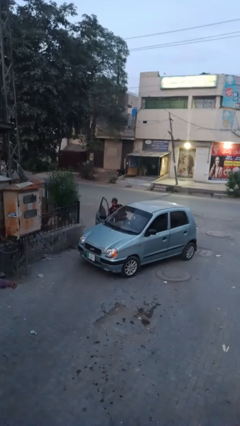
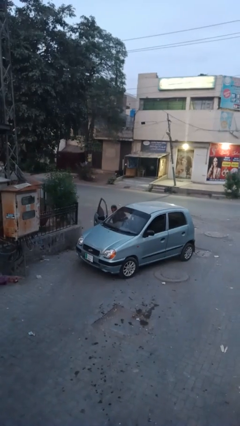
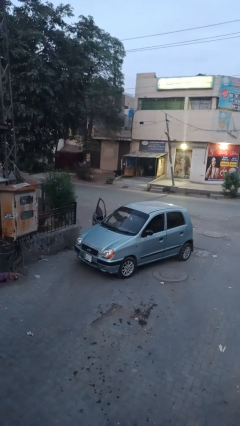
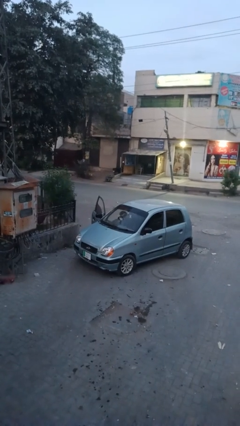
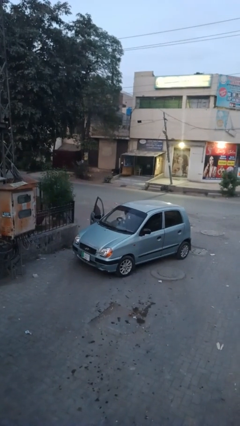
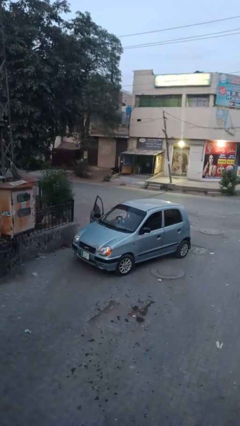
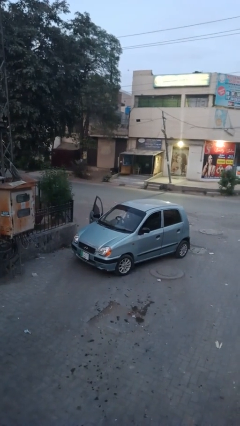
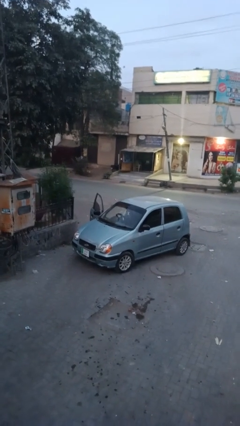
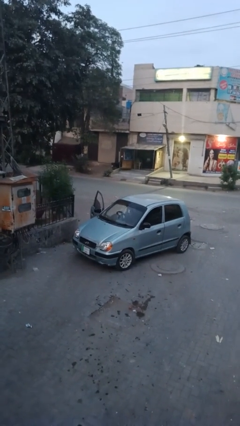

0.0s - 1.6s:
person enters car

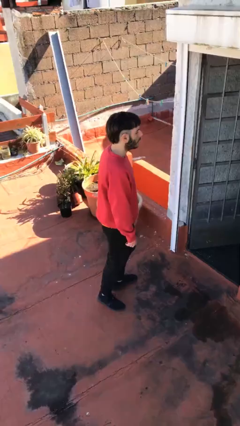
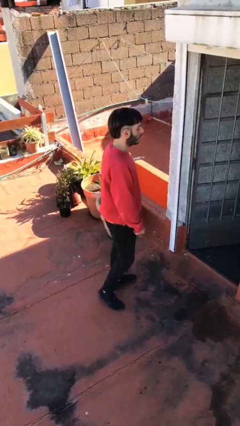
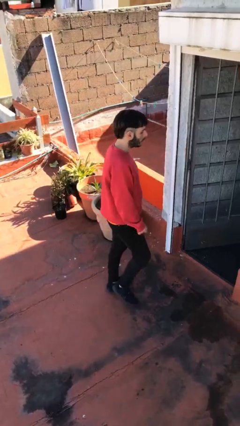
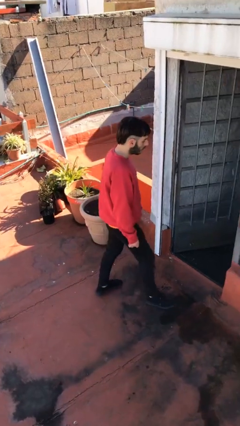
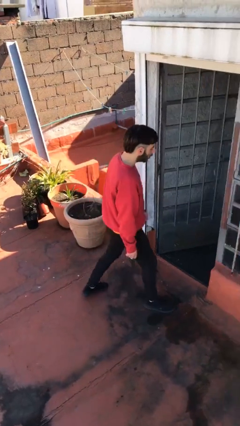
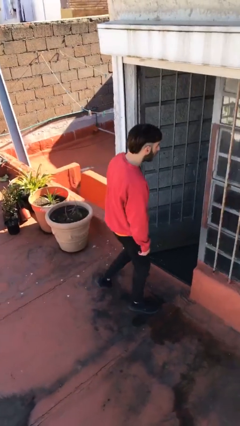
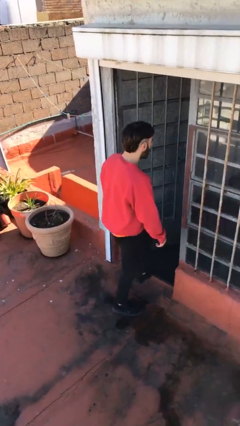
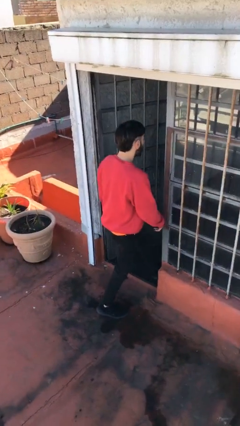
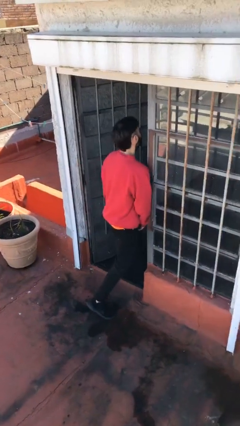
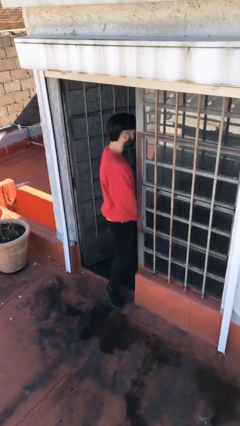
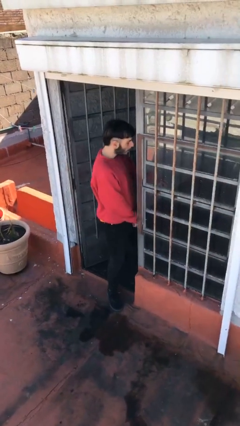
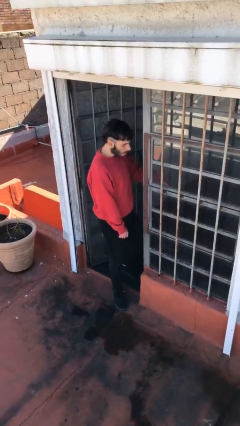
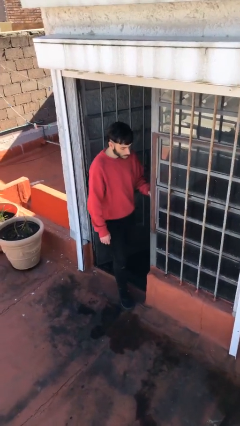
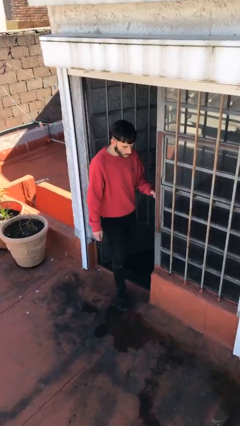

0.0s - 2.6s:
person bumps into wall

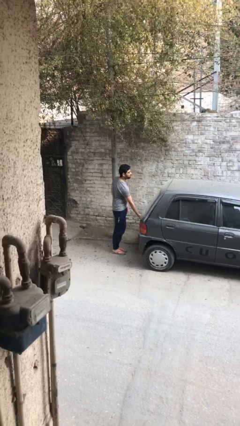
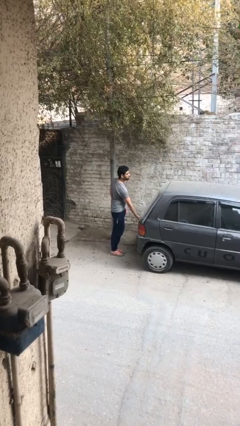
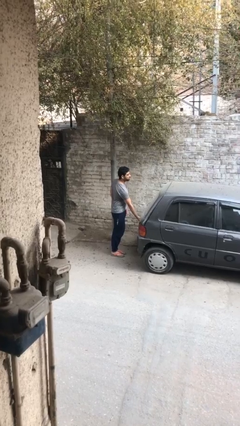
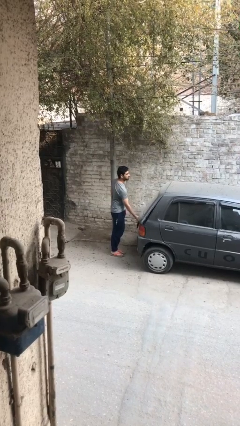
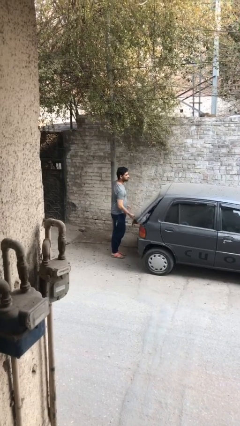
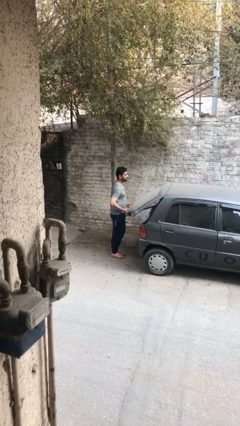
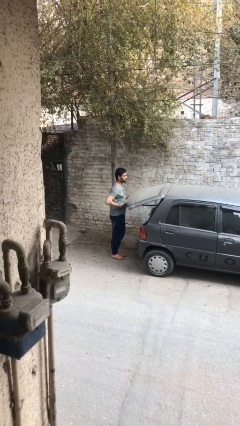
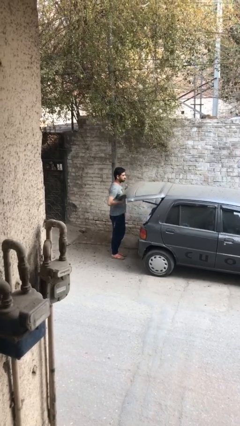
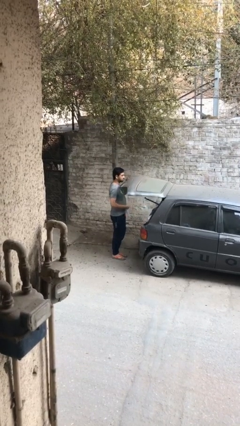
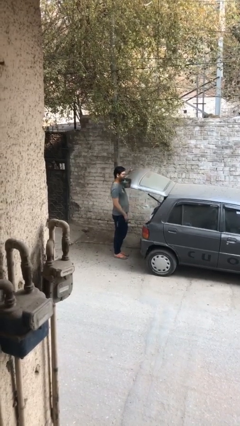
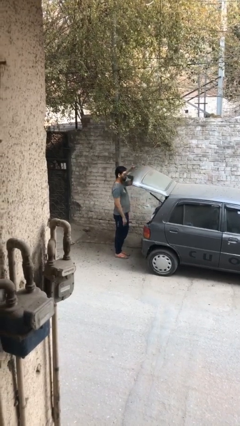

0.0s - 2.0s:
person opens car trunk

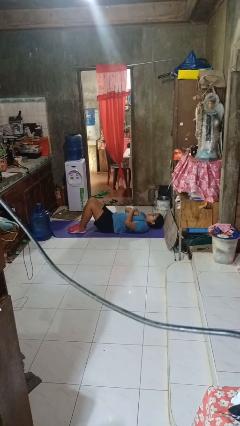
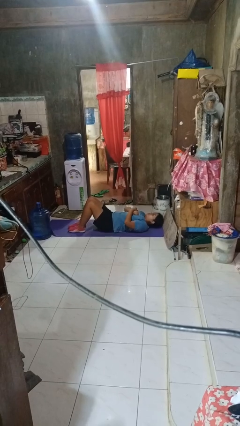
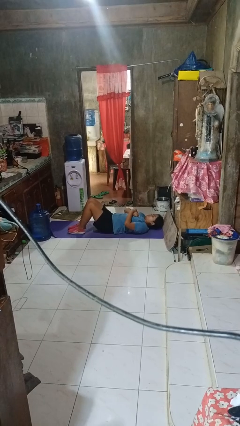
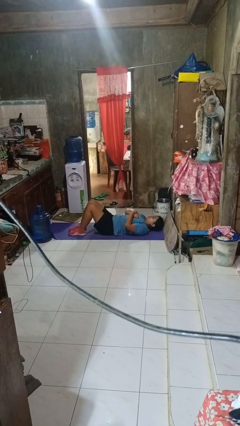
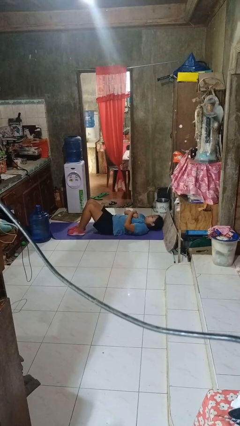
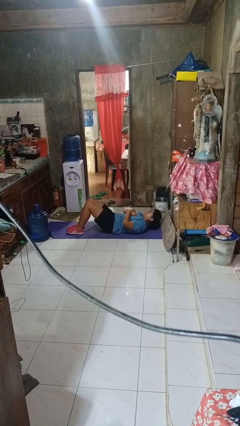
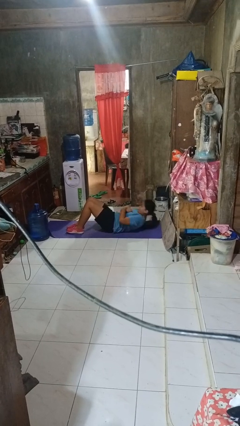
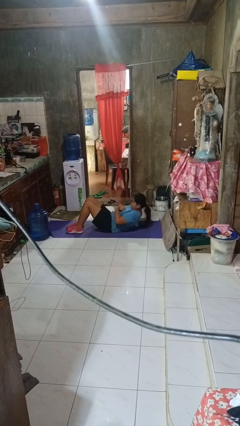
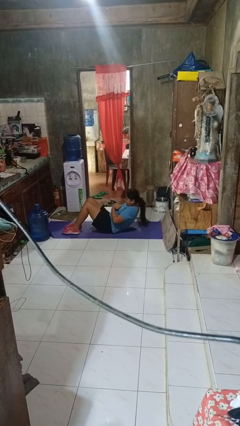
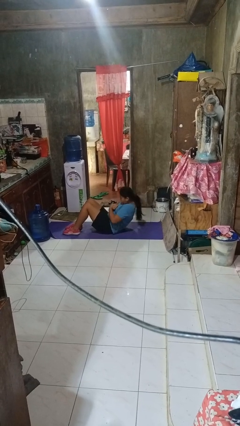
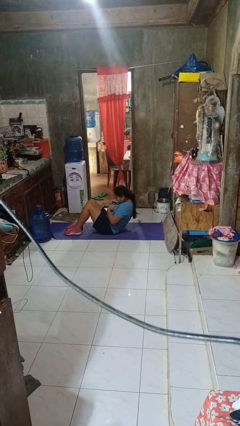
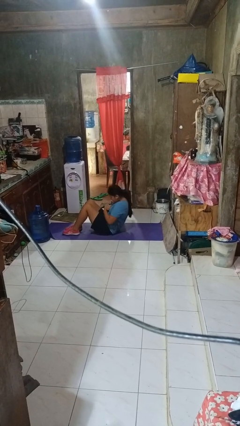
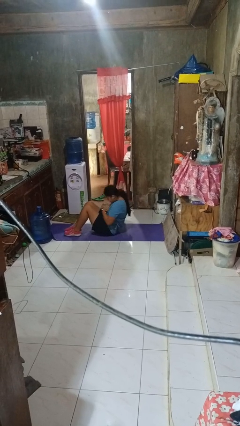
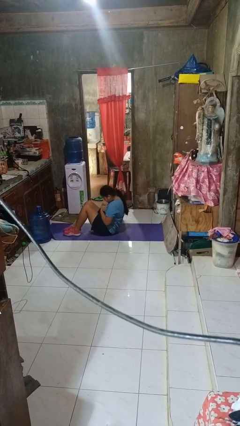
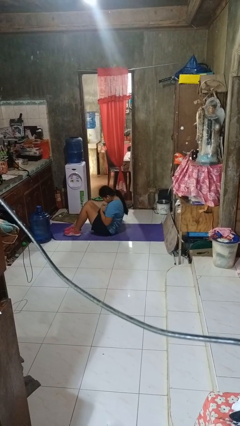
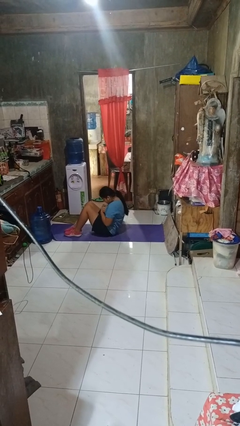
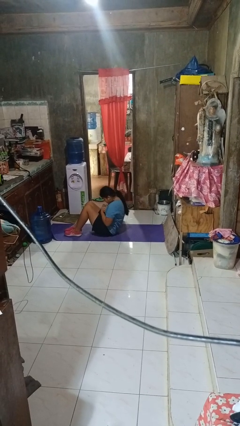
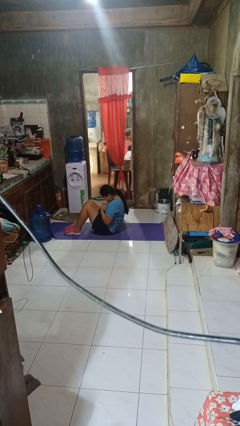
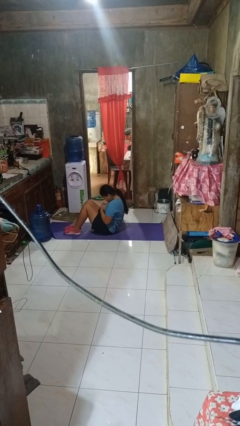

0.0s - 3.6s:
person exercises with situp

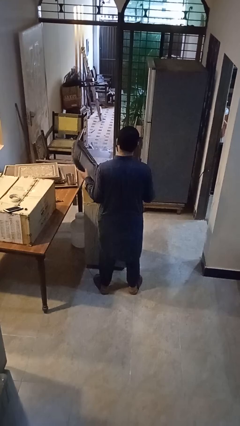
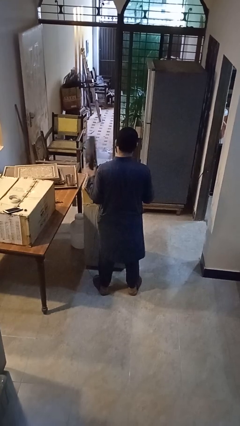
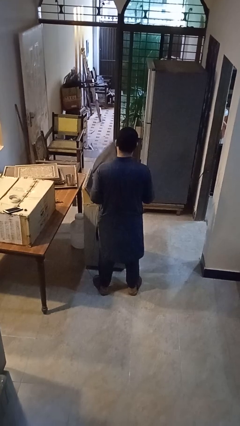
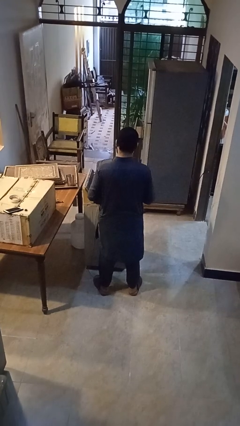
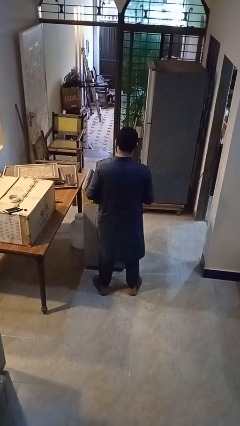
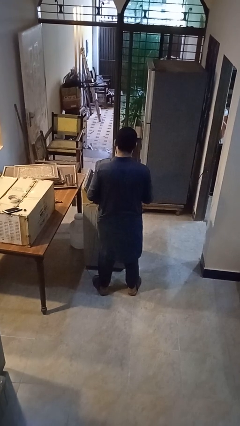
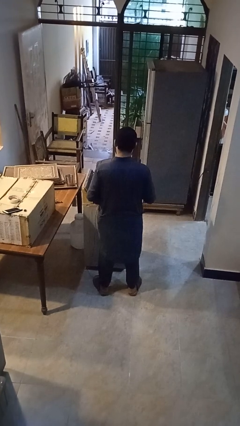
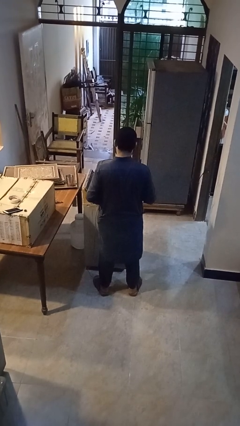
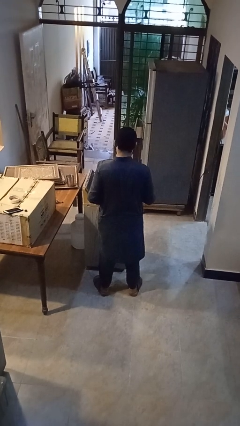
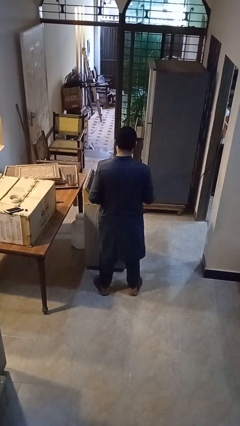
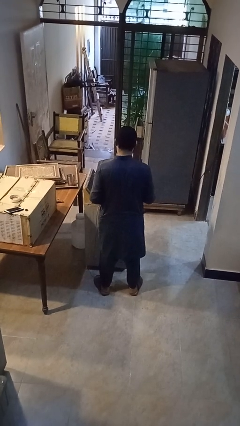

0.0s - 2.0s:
person closes suitcase

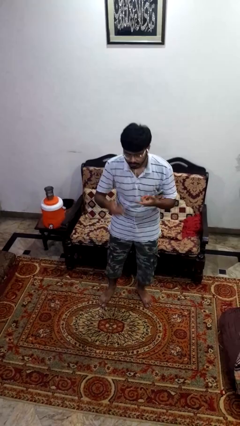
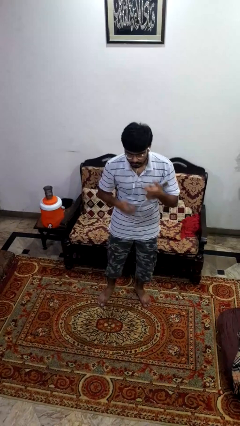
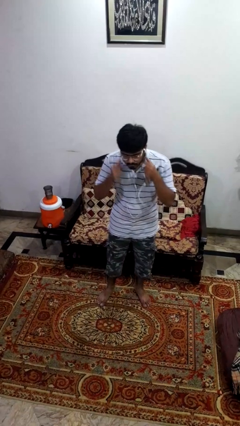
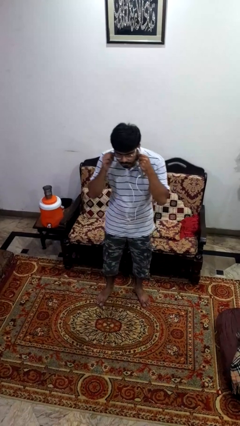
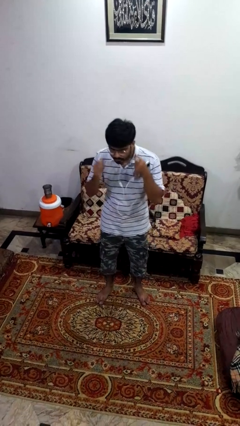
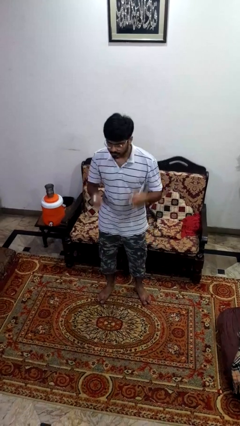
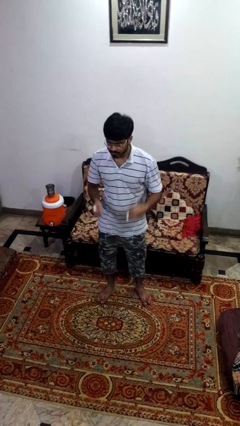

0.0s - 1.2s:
person takes off headphones

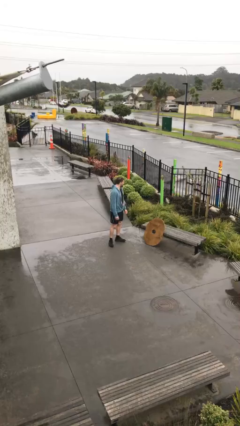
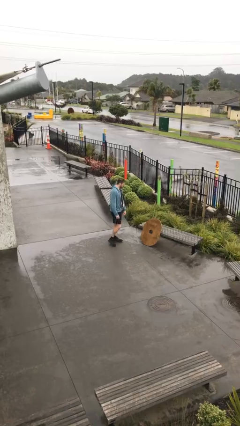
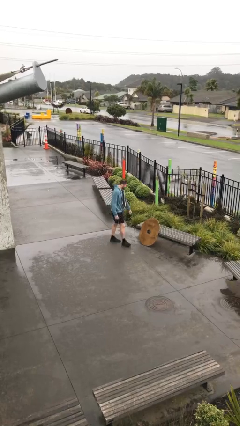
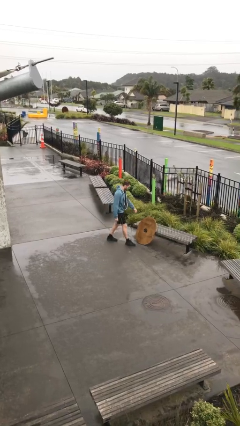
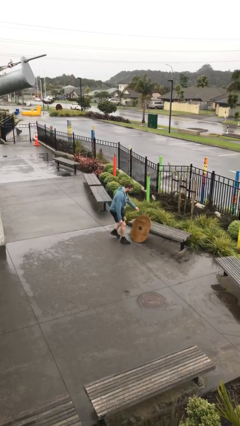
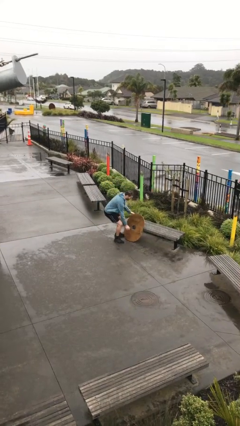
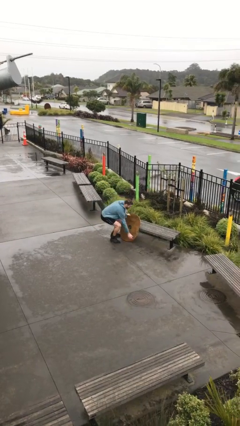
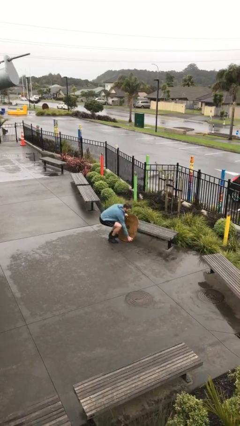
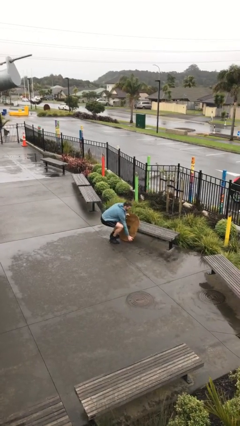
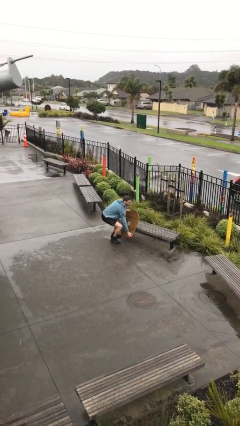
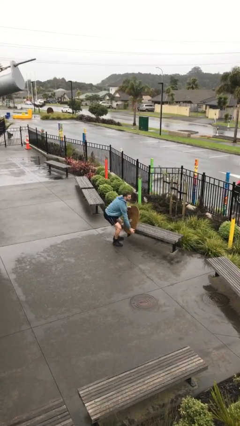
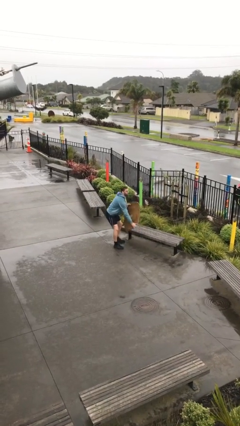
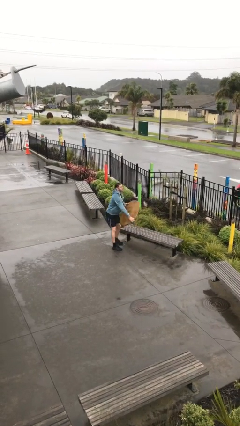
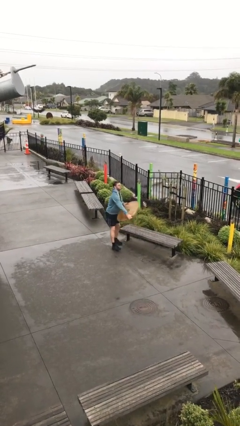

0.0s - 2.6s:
person picks up object from floor

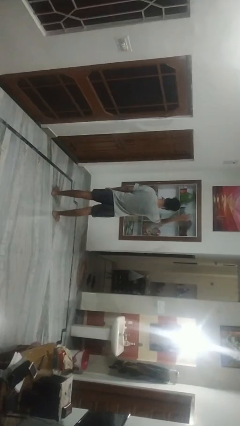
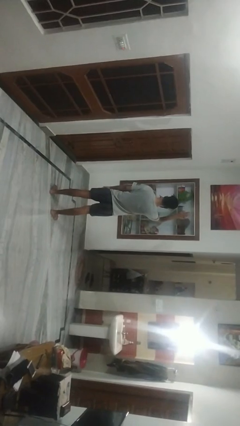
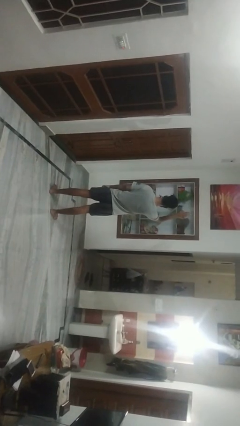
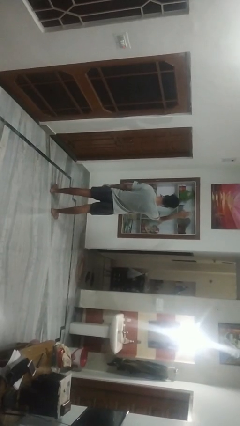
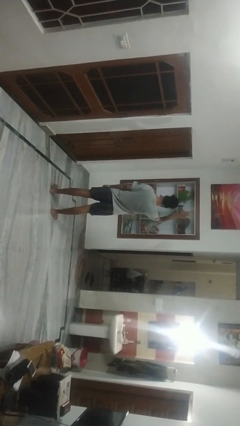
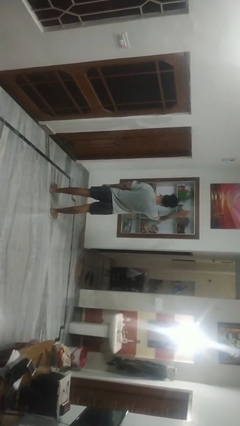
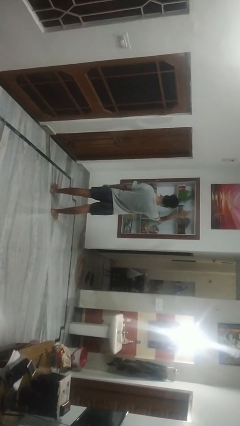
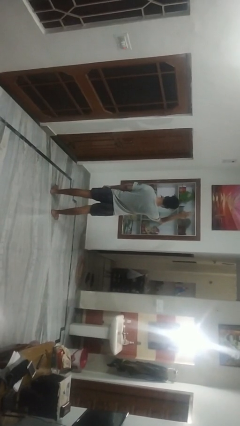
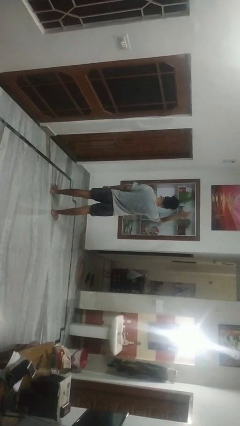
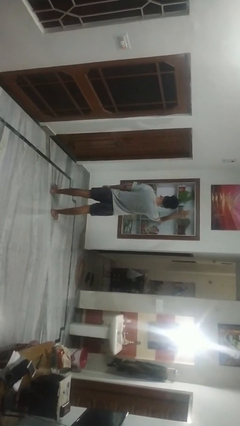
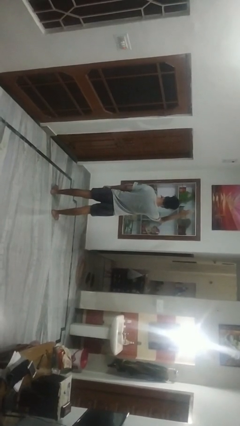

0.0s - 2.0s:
person gestures raise hand
